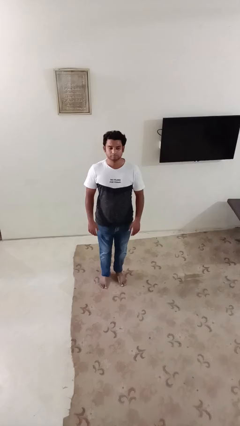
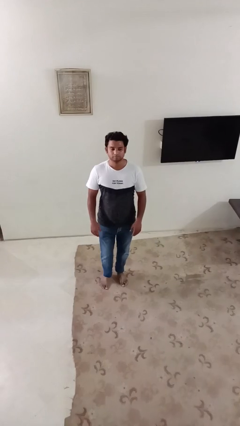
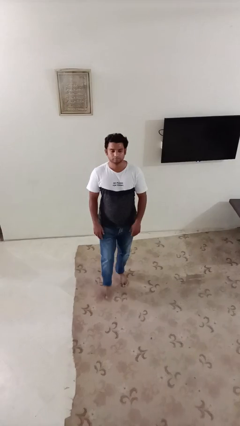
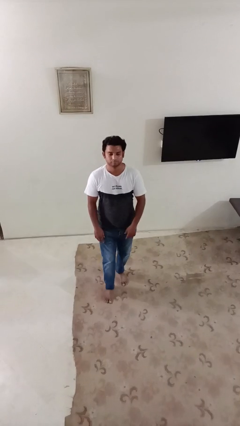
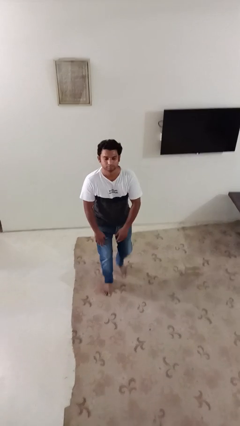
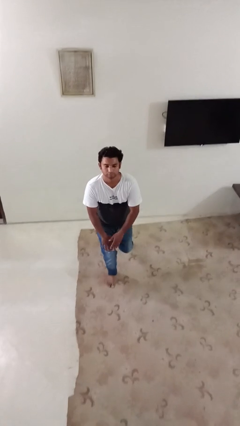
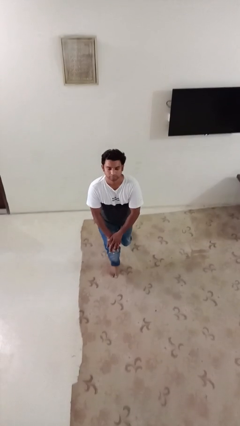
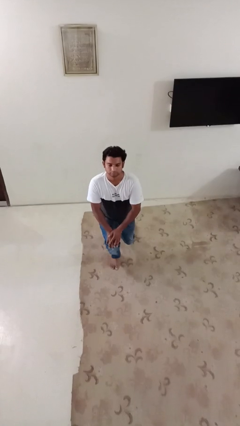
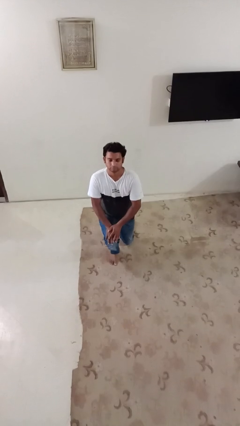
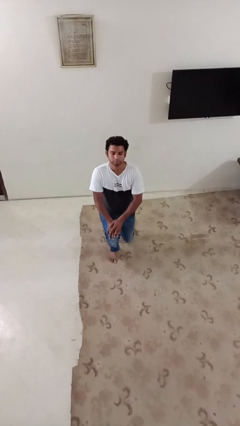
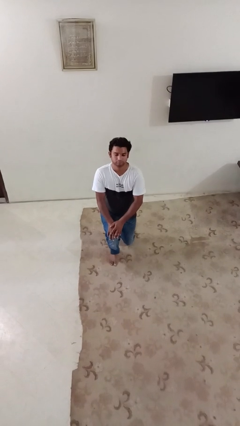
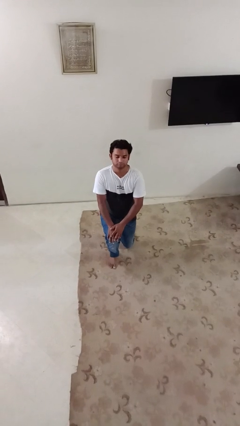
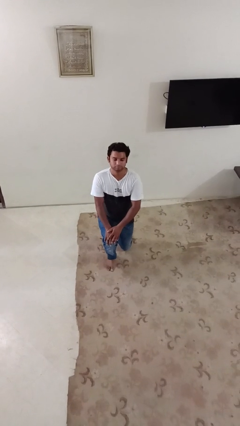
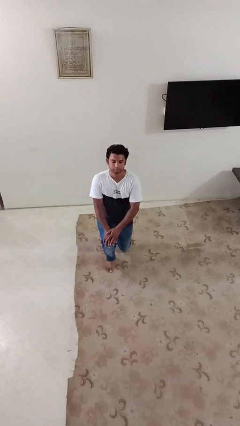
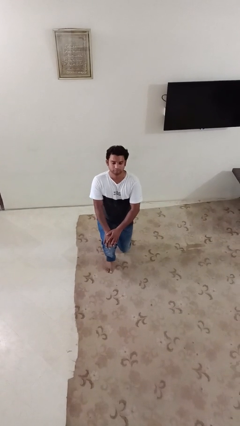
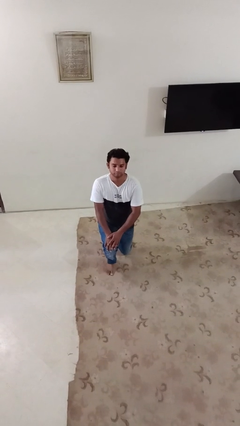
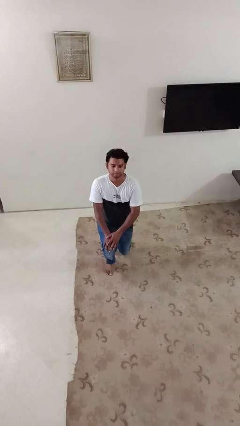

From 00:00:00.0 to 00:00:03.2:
person kneels

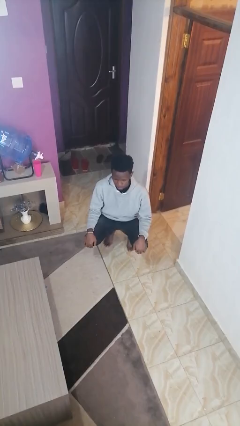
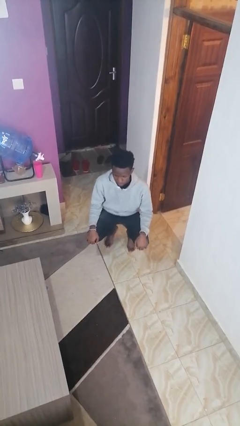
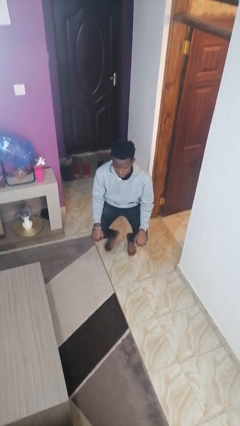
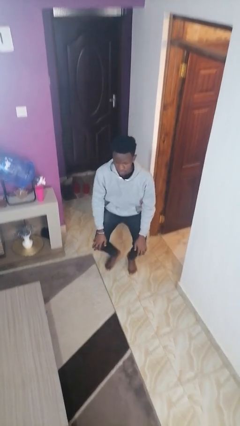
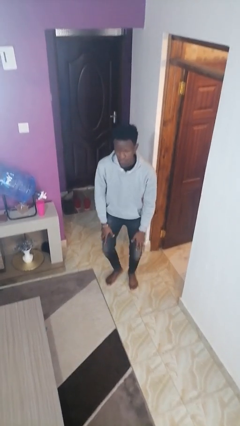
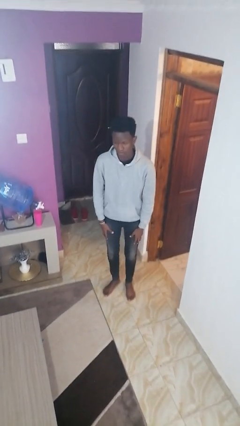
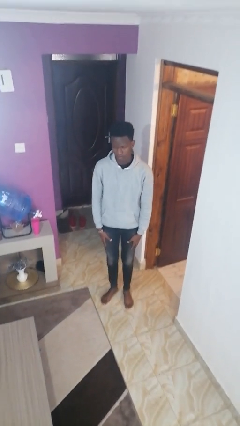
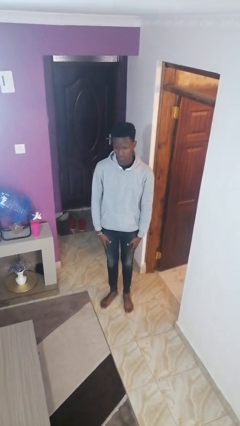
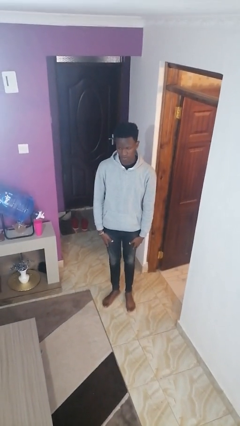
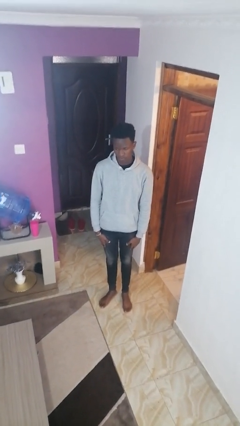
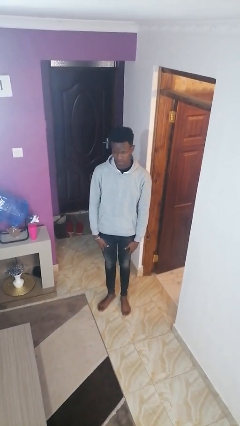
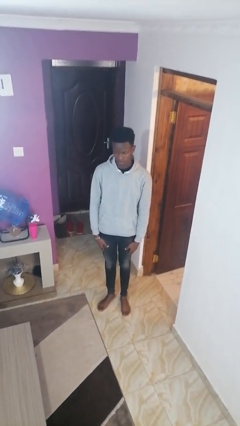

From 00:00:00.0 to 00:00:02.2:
person stands up

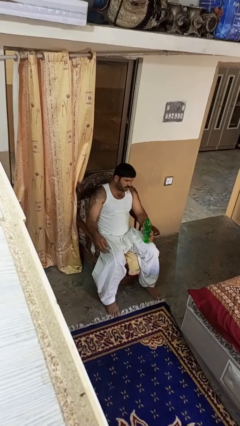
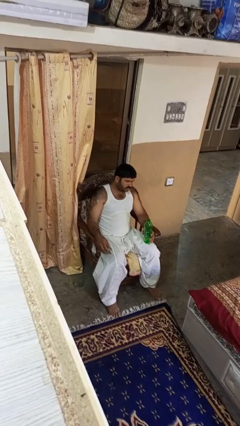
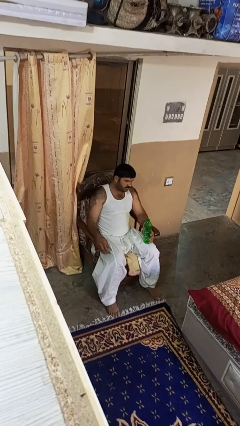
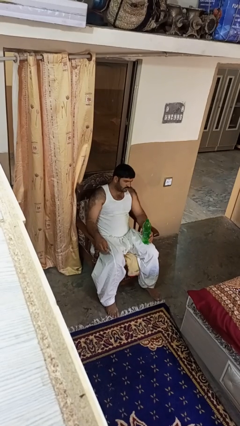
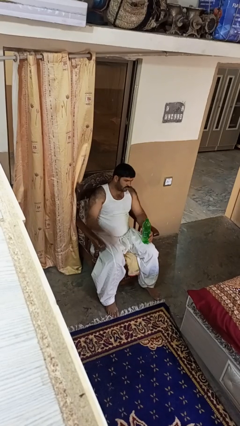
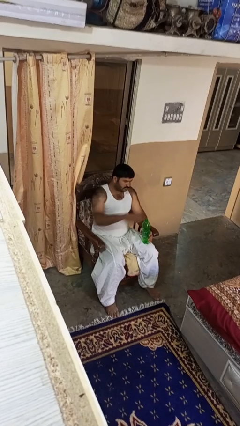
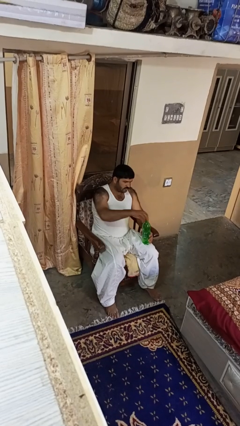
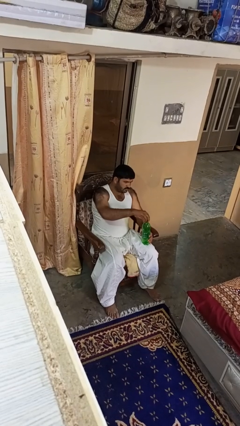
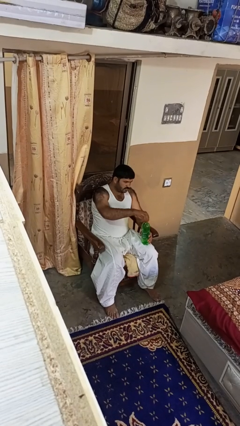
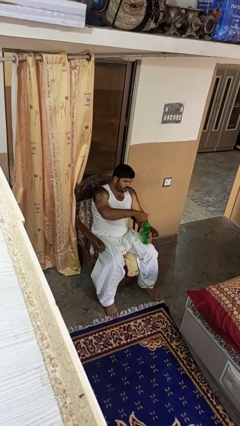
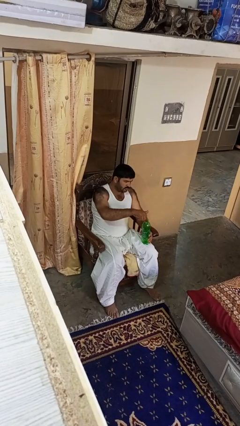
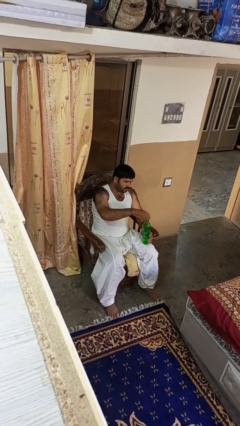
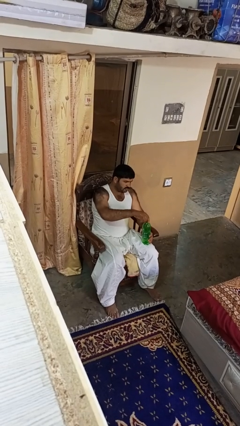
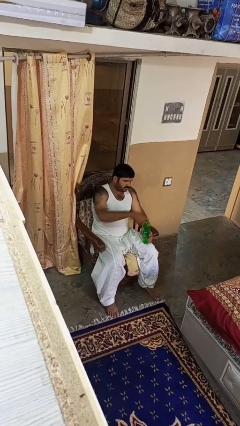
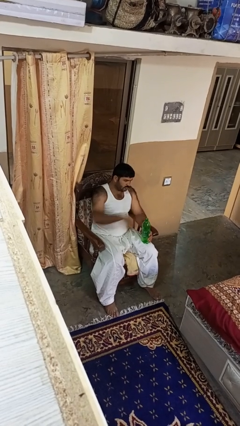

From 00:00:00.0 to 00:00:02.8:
person screws lid to bottle

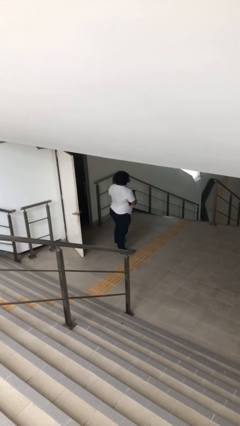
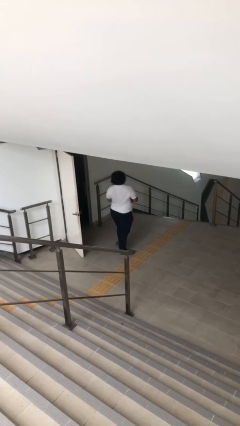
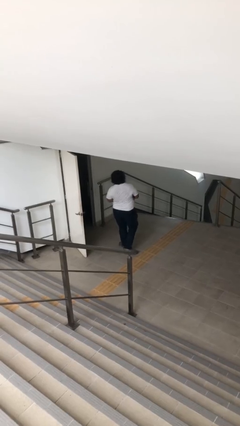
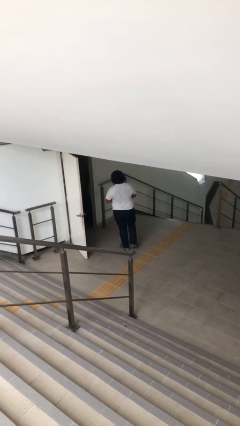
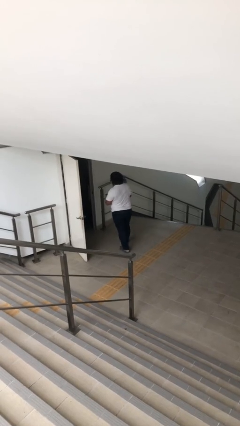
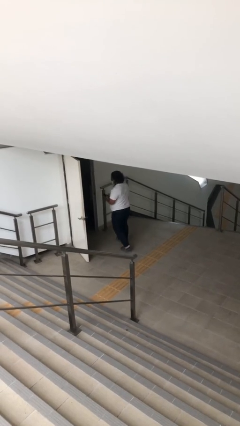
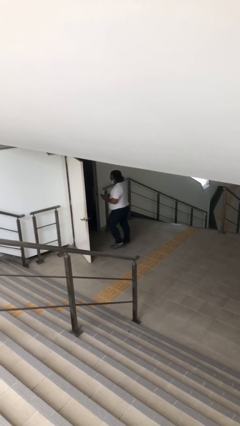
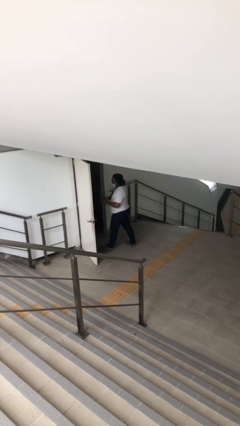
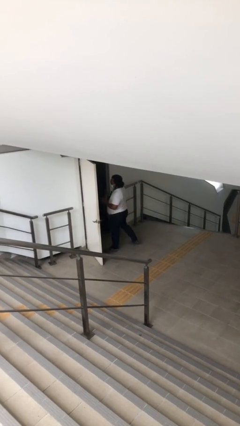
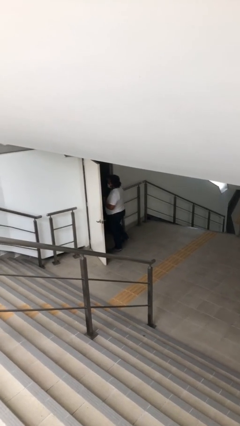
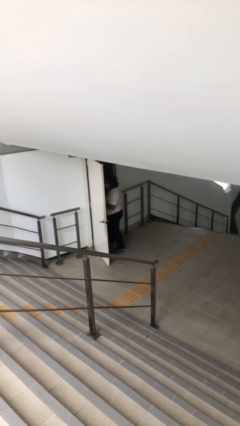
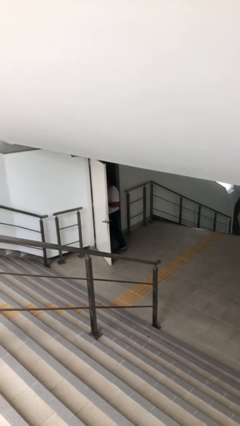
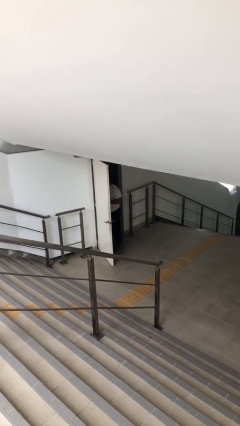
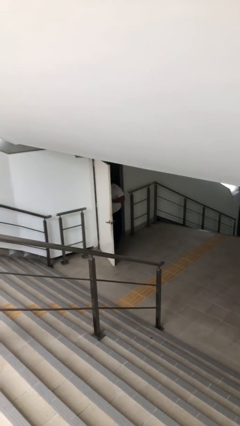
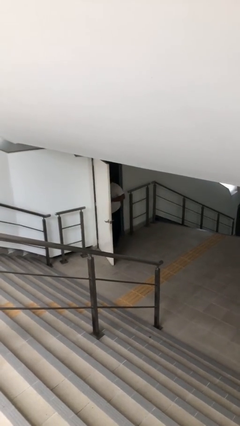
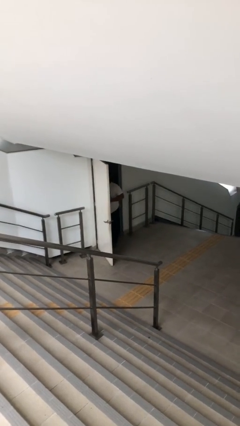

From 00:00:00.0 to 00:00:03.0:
person exits scene through structure

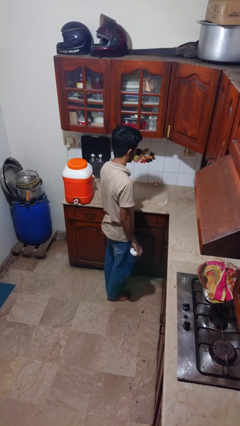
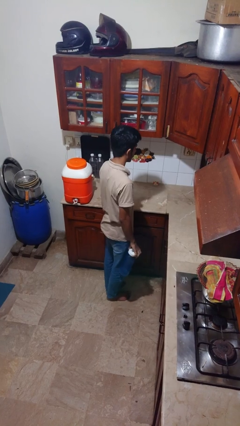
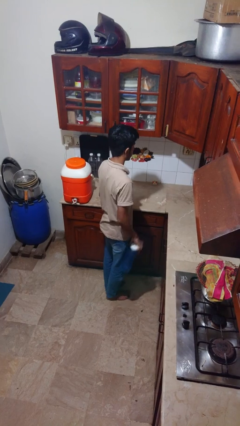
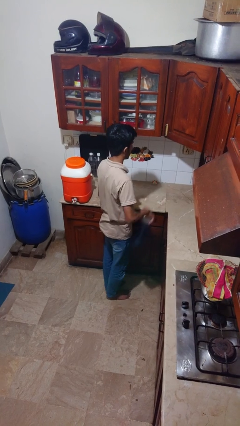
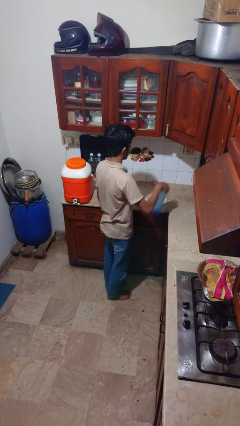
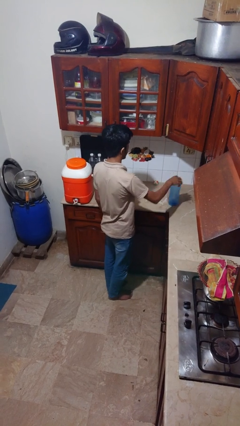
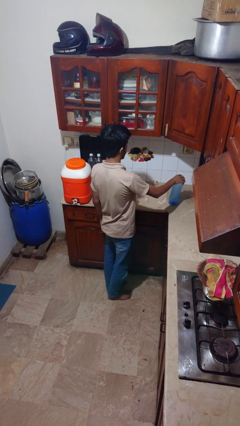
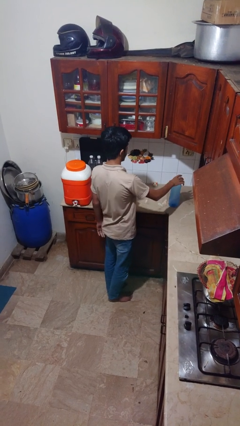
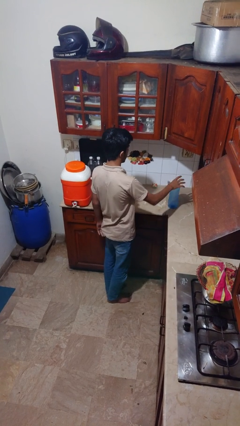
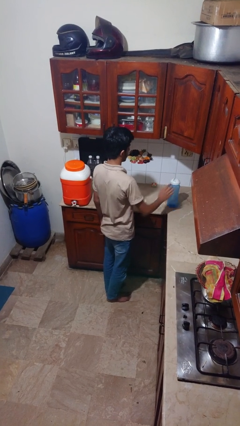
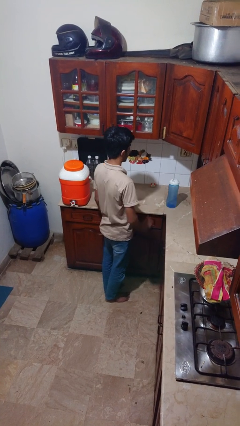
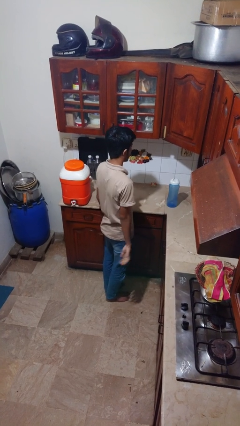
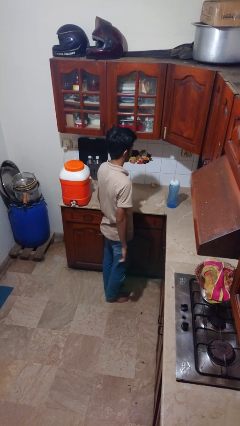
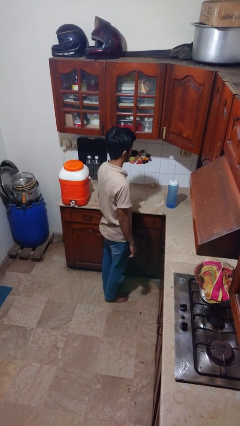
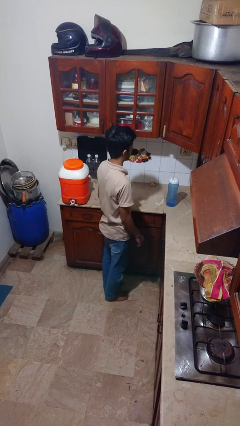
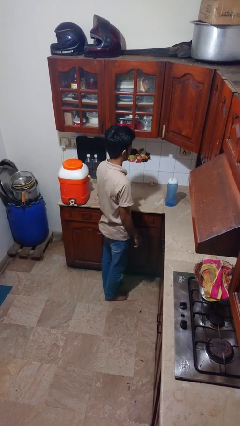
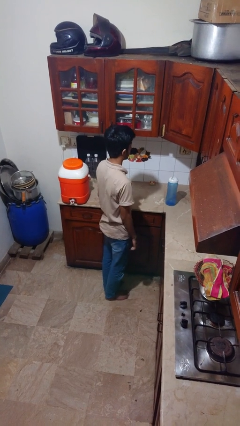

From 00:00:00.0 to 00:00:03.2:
person puts down object on countertop

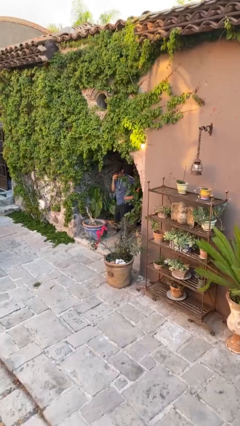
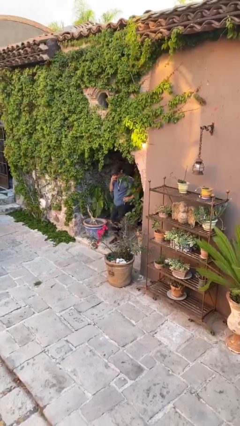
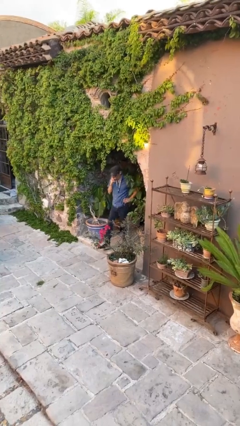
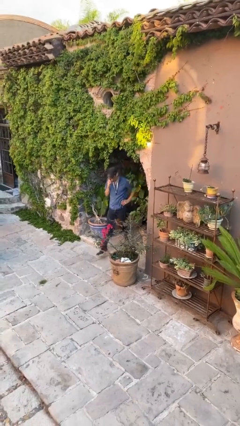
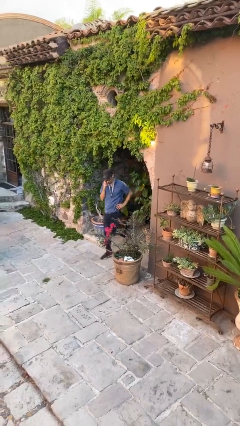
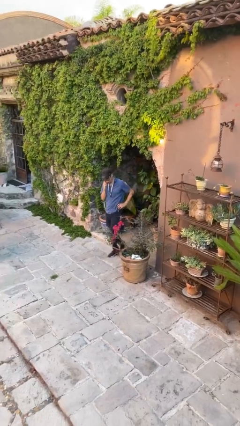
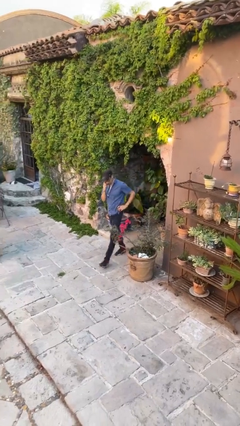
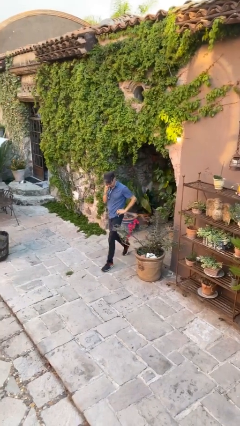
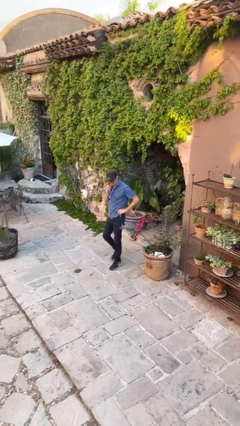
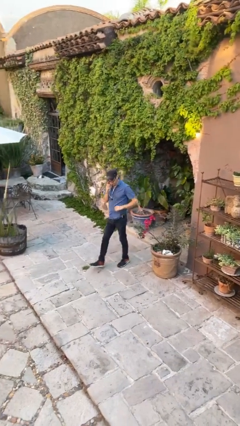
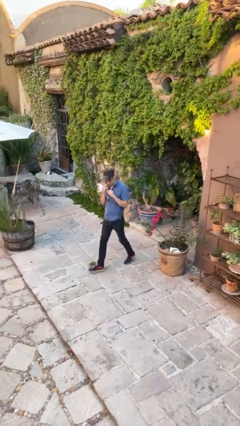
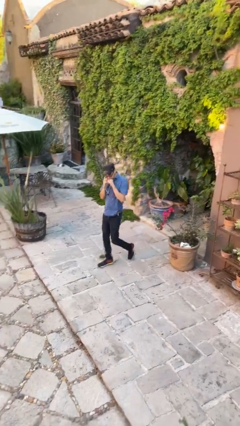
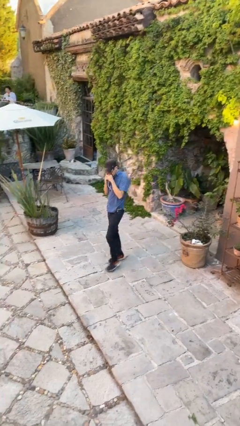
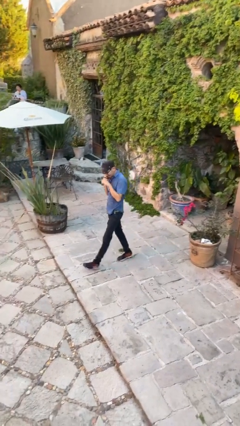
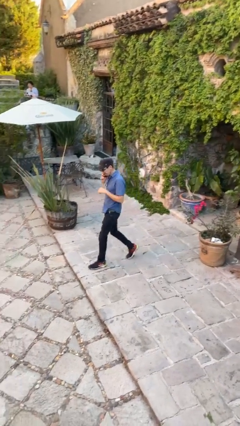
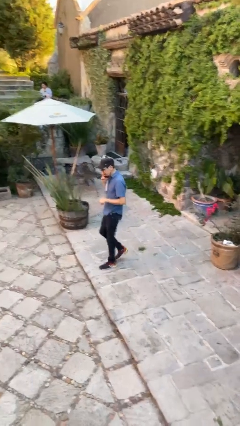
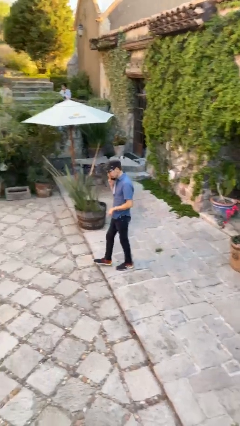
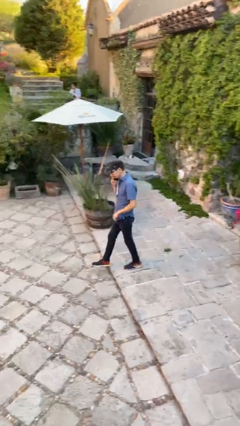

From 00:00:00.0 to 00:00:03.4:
person enters scene through structure
